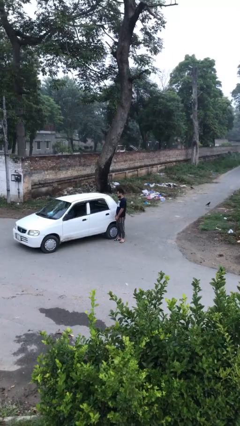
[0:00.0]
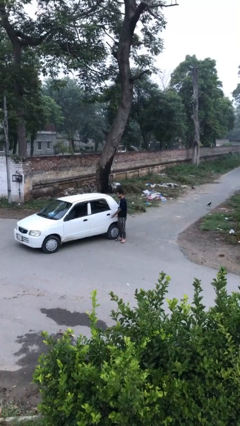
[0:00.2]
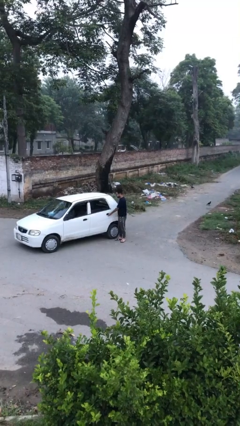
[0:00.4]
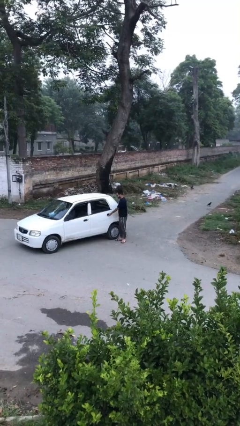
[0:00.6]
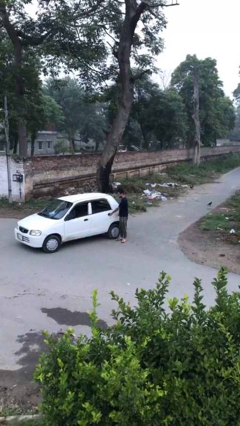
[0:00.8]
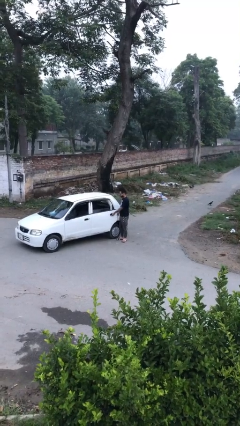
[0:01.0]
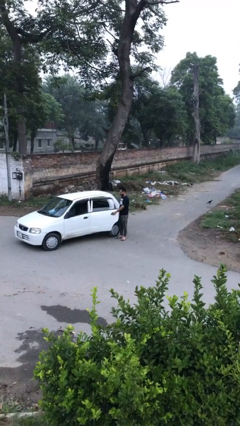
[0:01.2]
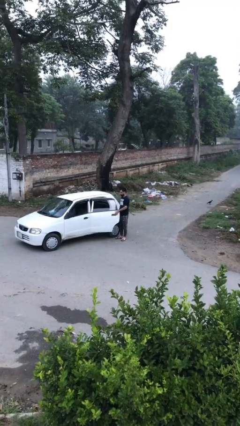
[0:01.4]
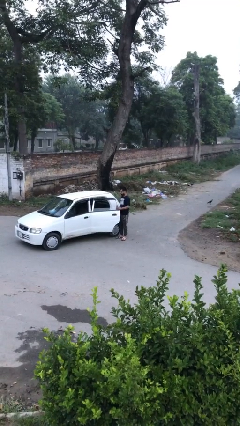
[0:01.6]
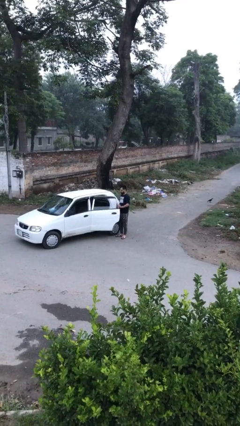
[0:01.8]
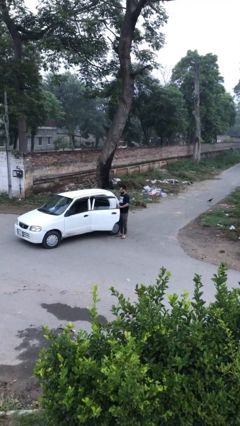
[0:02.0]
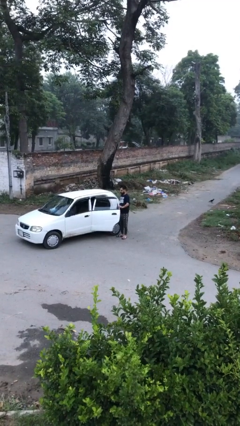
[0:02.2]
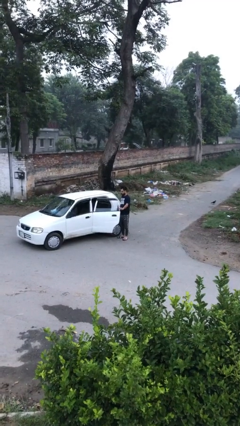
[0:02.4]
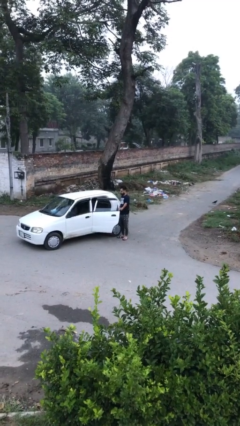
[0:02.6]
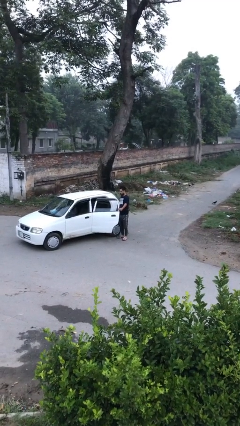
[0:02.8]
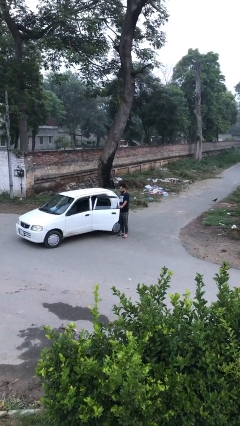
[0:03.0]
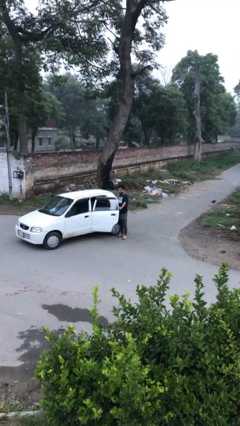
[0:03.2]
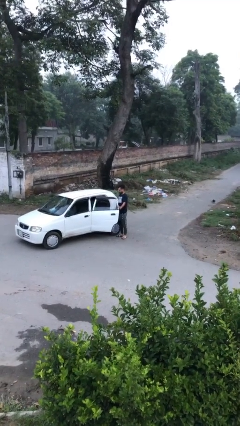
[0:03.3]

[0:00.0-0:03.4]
person opens car door

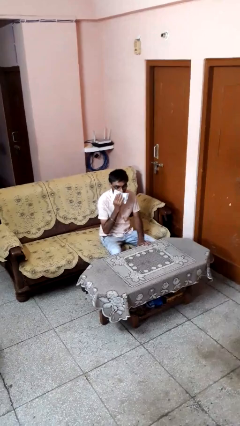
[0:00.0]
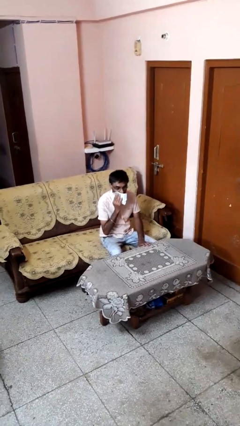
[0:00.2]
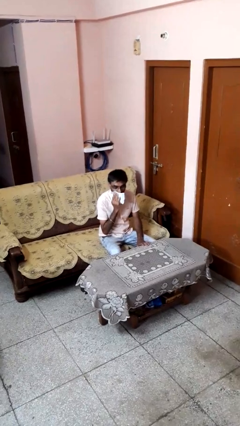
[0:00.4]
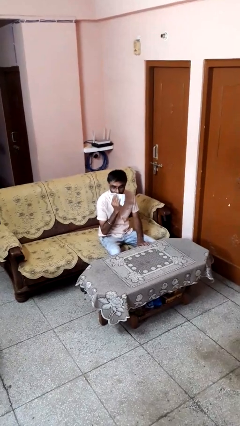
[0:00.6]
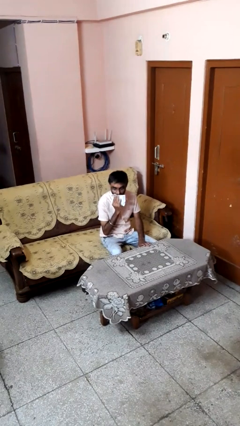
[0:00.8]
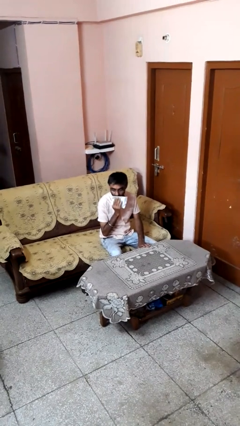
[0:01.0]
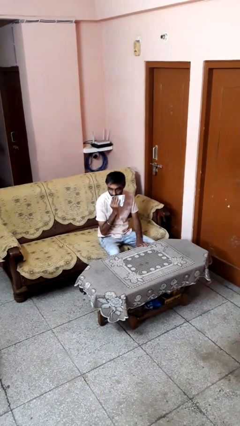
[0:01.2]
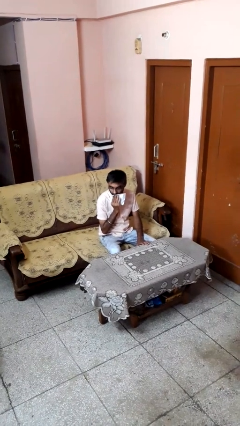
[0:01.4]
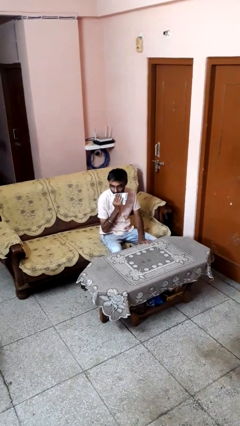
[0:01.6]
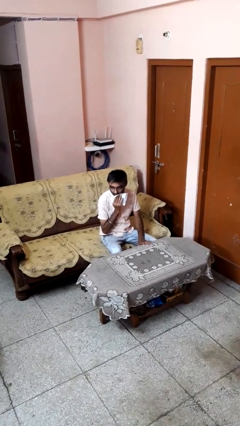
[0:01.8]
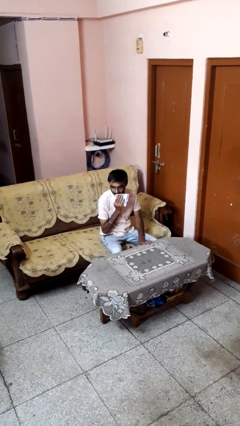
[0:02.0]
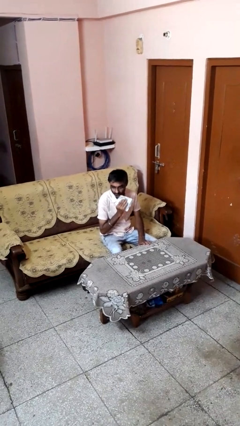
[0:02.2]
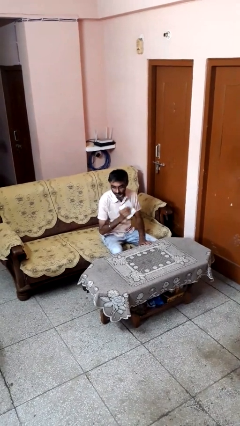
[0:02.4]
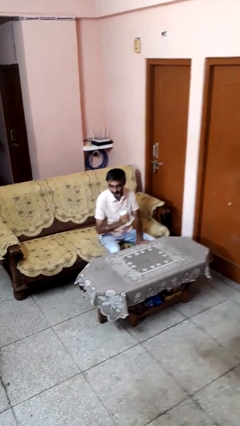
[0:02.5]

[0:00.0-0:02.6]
person wipes mouth with napkin

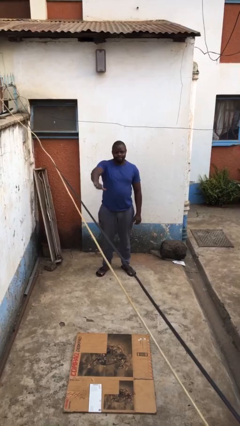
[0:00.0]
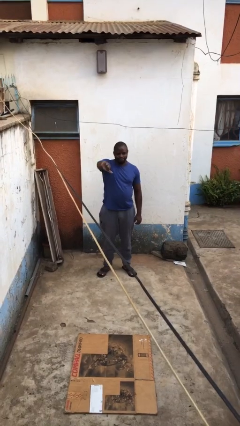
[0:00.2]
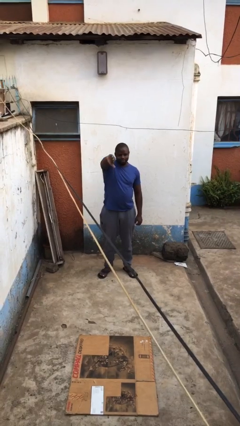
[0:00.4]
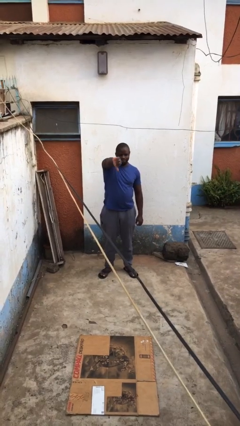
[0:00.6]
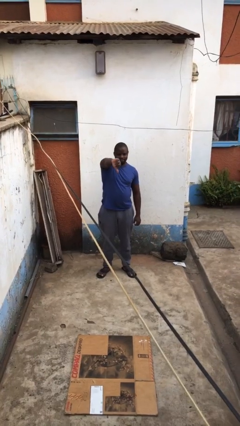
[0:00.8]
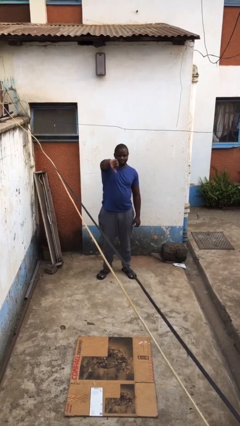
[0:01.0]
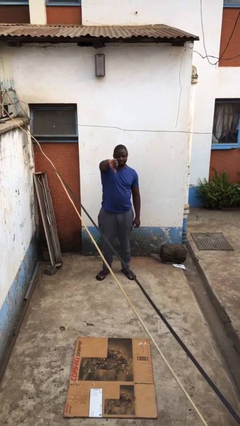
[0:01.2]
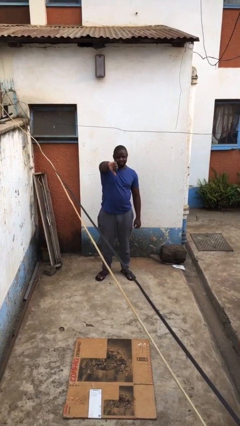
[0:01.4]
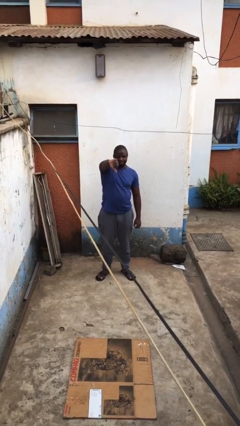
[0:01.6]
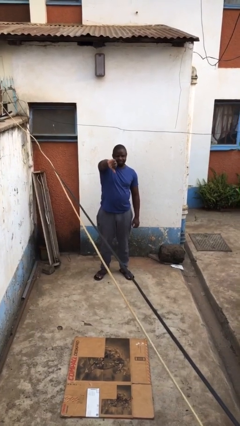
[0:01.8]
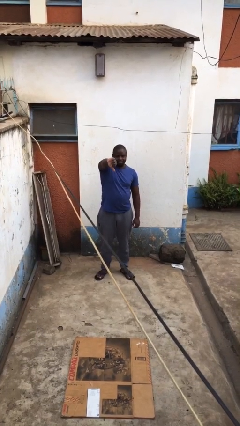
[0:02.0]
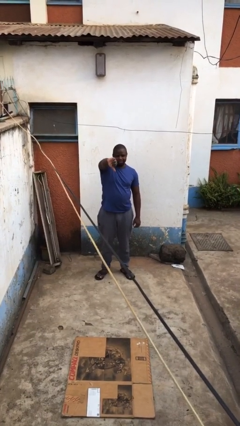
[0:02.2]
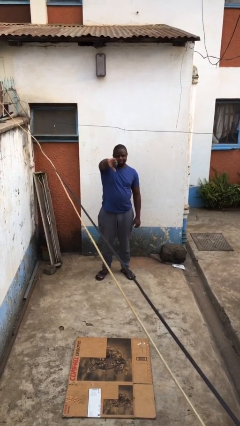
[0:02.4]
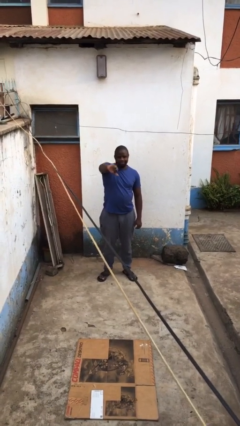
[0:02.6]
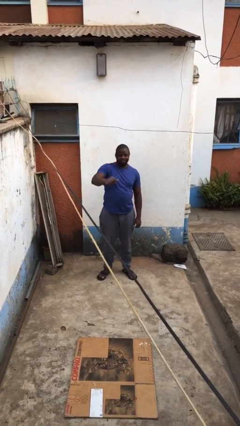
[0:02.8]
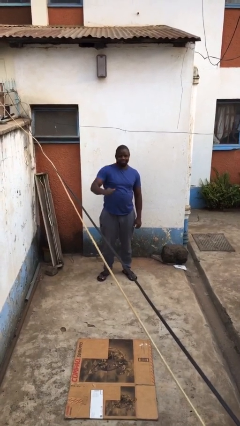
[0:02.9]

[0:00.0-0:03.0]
person gestures thumbs down

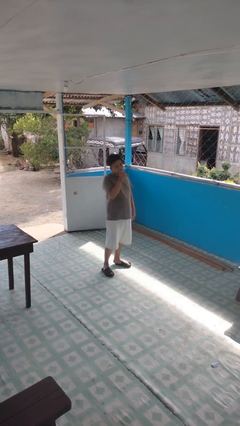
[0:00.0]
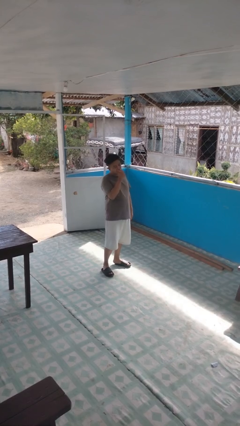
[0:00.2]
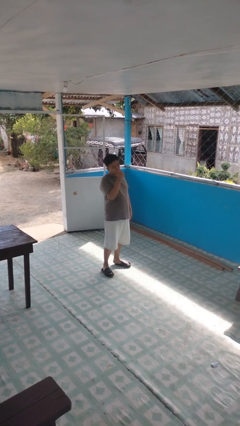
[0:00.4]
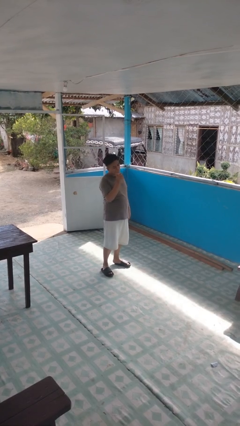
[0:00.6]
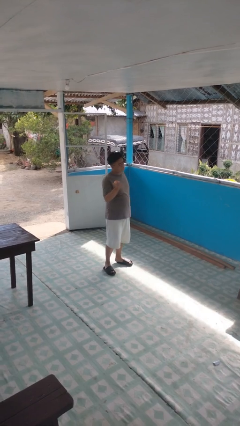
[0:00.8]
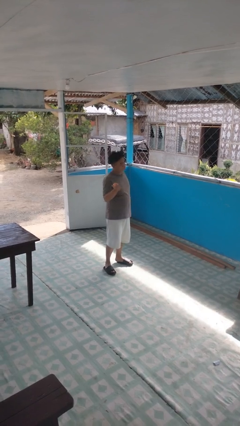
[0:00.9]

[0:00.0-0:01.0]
person eats apple

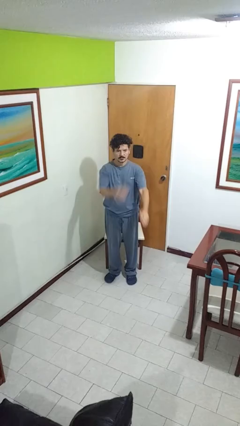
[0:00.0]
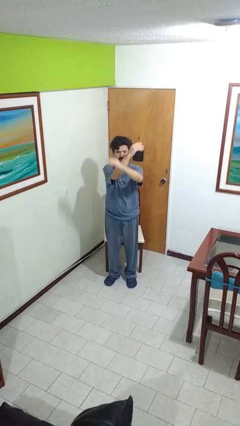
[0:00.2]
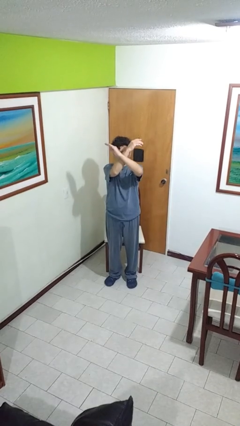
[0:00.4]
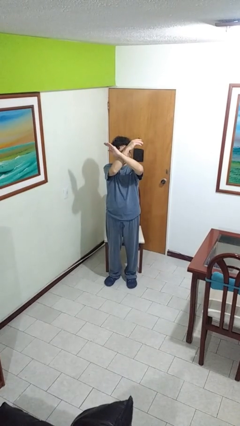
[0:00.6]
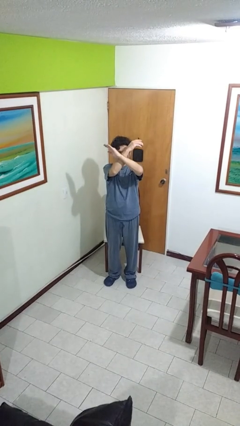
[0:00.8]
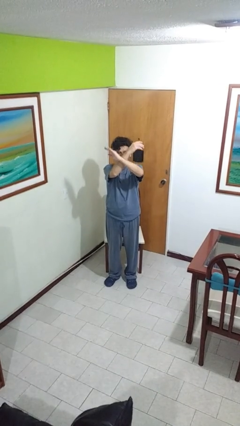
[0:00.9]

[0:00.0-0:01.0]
person gestures arms x

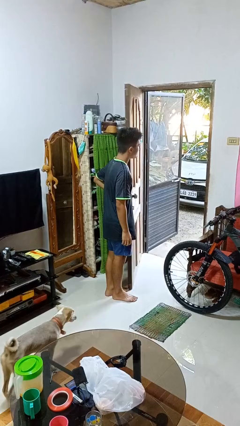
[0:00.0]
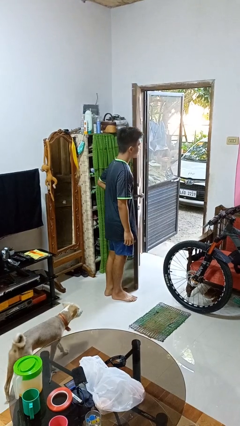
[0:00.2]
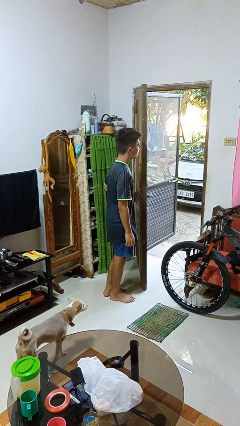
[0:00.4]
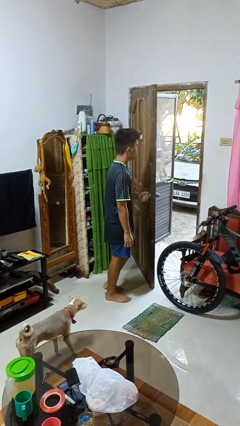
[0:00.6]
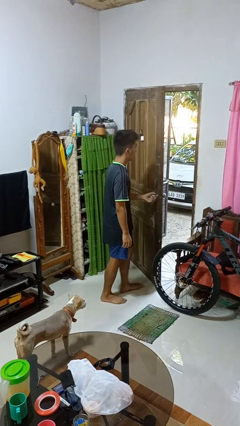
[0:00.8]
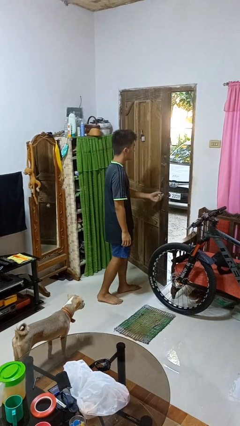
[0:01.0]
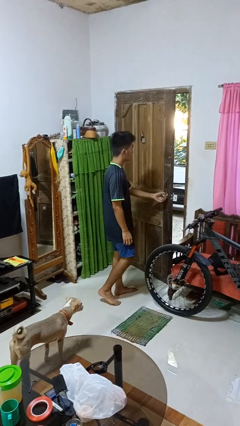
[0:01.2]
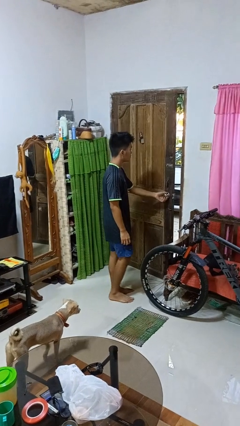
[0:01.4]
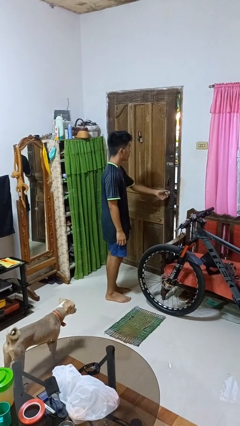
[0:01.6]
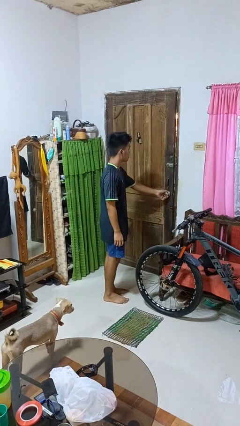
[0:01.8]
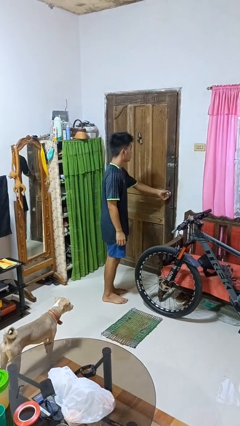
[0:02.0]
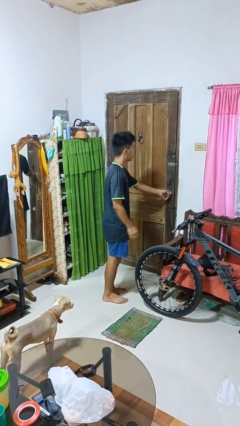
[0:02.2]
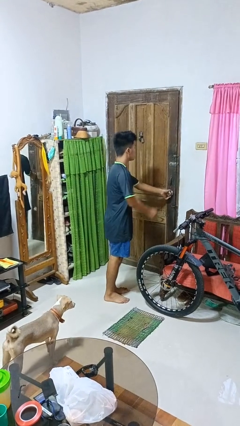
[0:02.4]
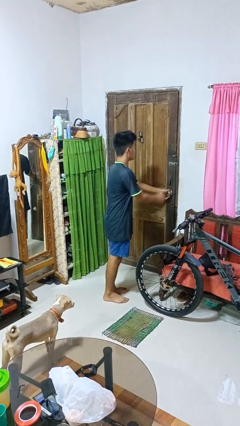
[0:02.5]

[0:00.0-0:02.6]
person closes facility door

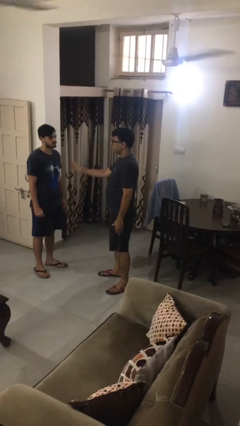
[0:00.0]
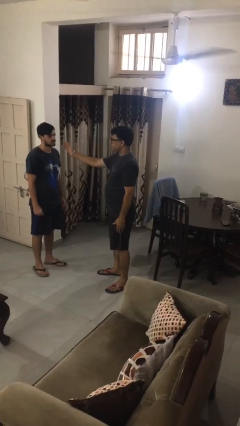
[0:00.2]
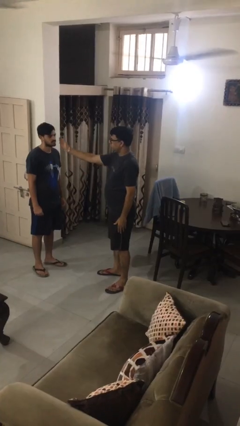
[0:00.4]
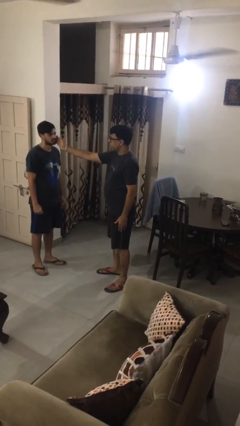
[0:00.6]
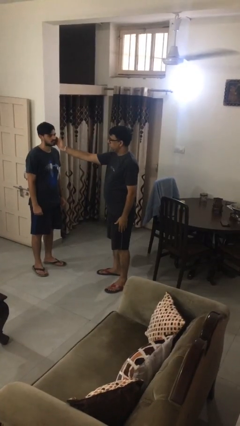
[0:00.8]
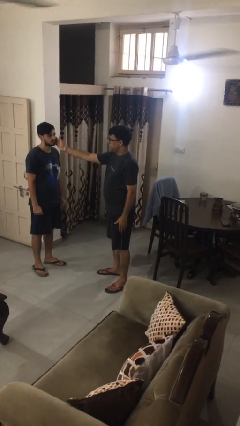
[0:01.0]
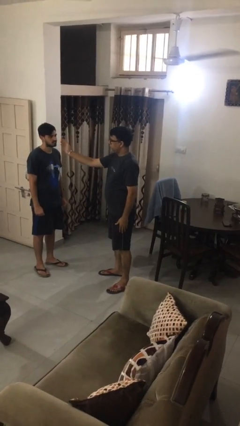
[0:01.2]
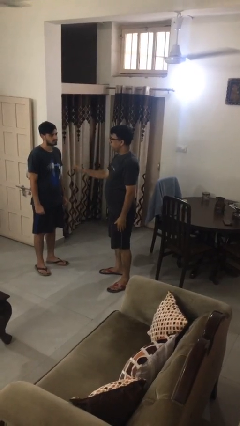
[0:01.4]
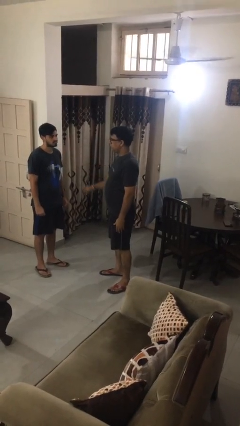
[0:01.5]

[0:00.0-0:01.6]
person touches face of person

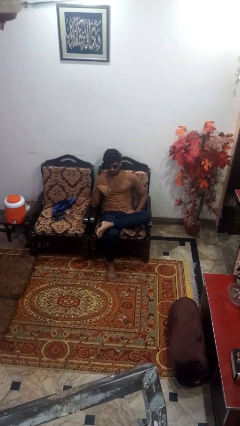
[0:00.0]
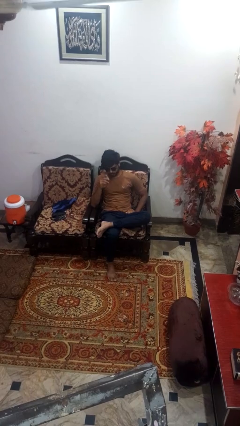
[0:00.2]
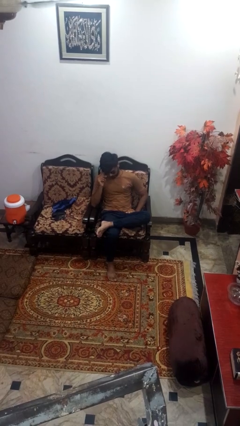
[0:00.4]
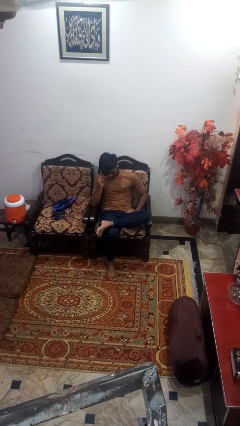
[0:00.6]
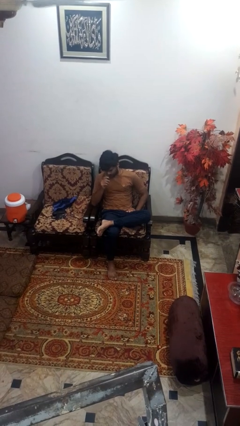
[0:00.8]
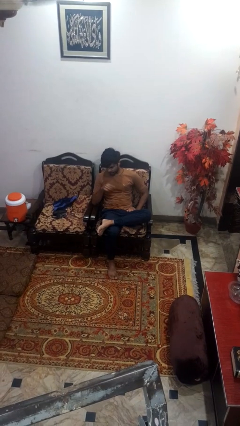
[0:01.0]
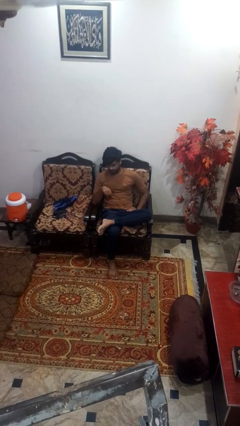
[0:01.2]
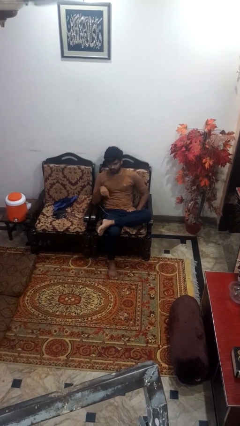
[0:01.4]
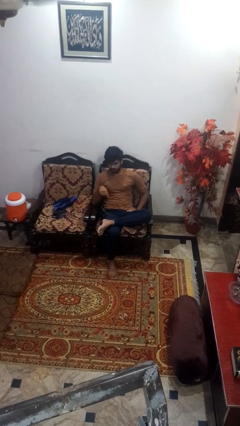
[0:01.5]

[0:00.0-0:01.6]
person takes off sunglasses
